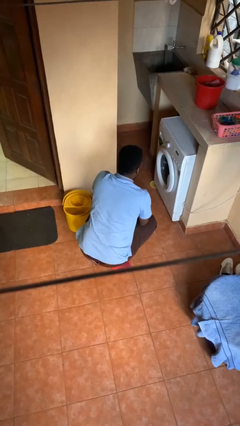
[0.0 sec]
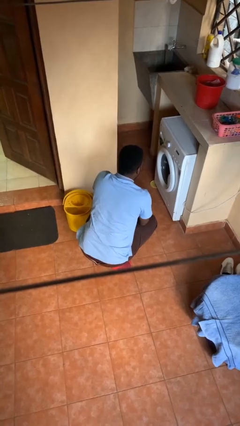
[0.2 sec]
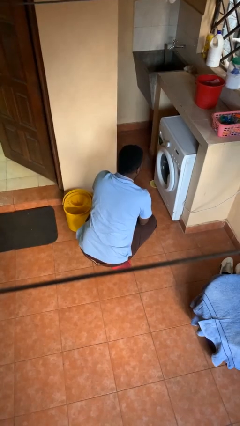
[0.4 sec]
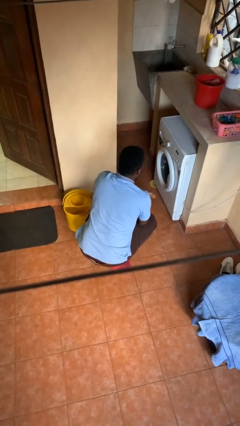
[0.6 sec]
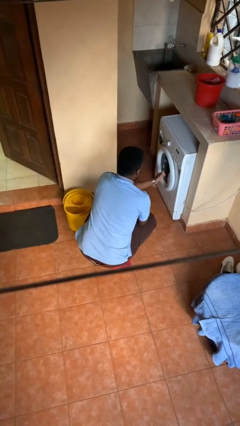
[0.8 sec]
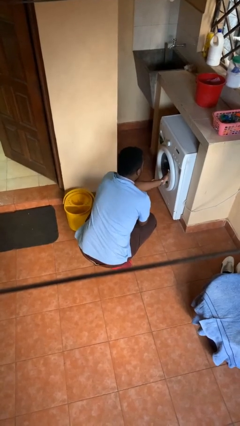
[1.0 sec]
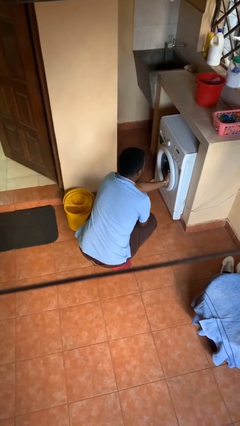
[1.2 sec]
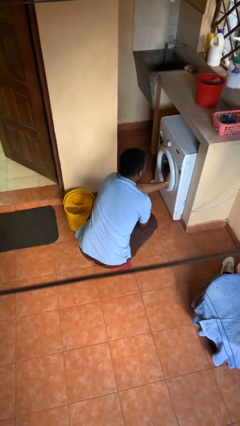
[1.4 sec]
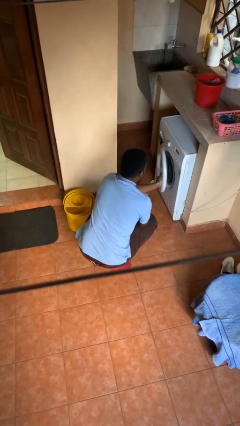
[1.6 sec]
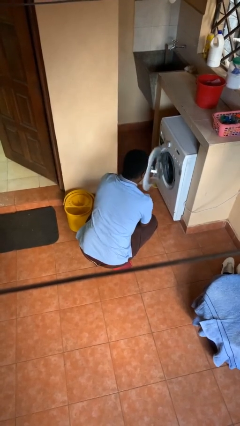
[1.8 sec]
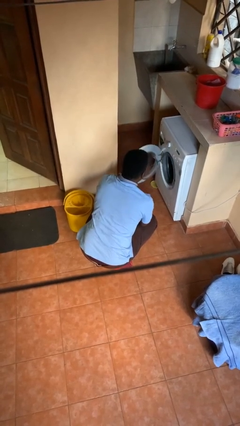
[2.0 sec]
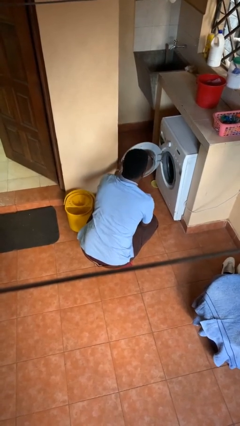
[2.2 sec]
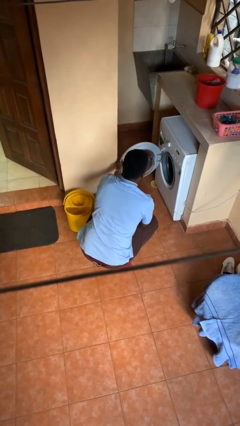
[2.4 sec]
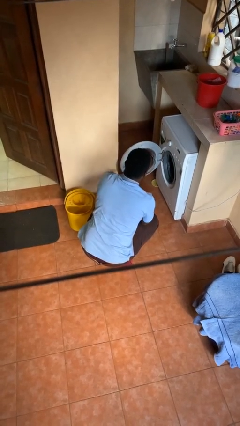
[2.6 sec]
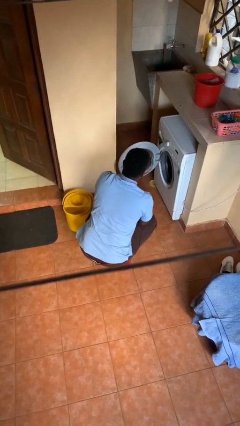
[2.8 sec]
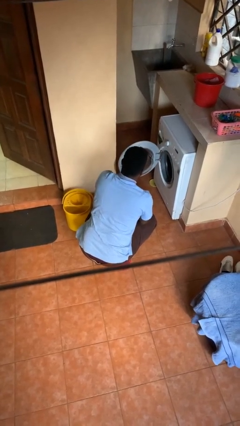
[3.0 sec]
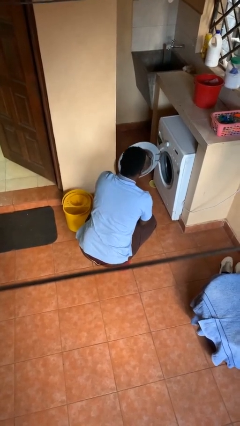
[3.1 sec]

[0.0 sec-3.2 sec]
person opens clothes washer

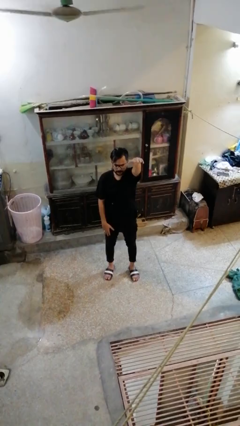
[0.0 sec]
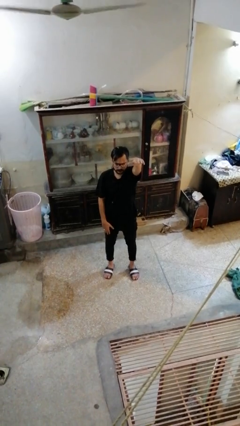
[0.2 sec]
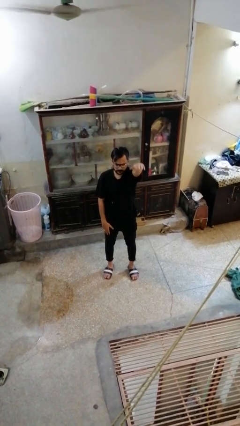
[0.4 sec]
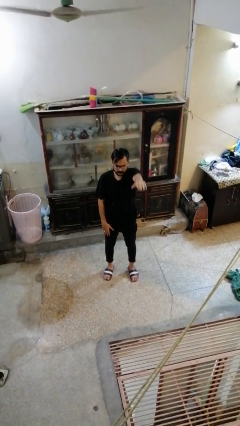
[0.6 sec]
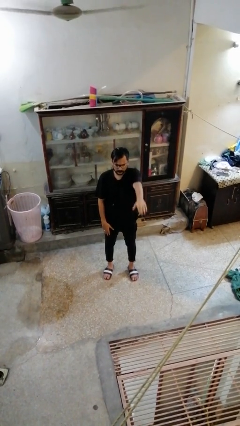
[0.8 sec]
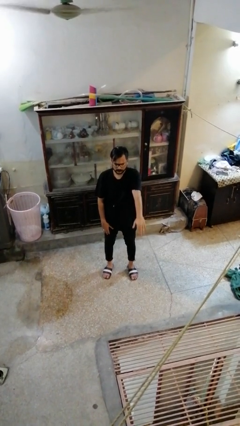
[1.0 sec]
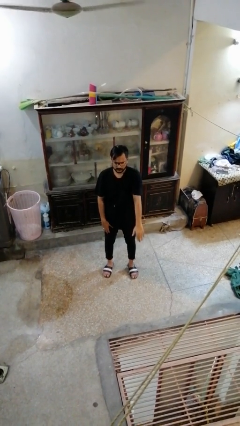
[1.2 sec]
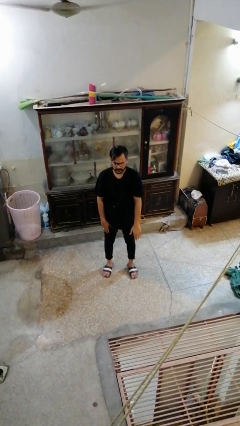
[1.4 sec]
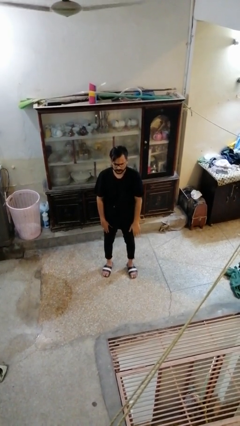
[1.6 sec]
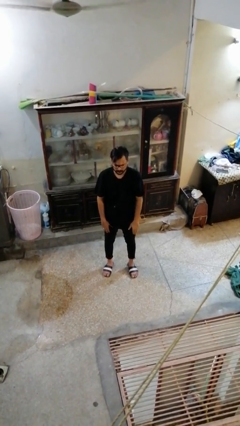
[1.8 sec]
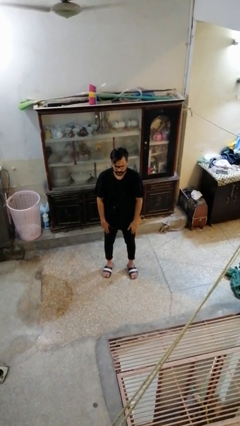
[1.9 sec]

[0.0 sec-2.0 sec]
person gestures swipe down

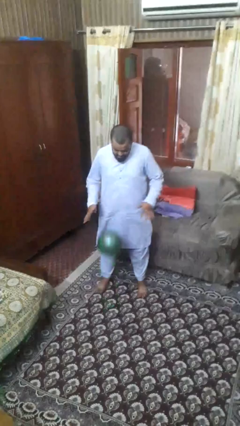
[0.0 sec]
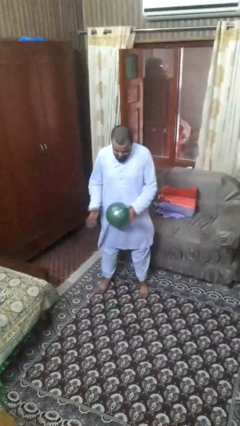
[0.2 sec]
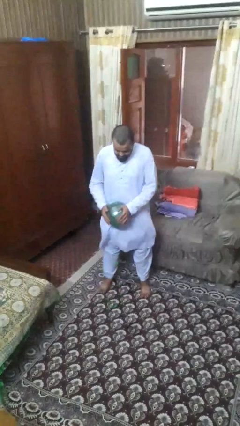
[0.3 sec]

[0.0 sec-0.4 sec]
person bounces ball on floor

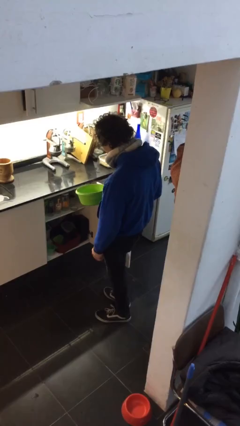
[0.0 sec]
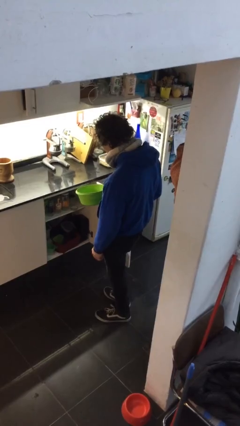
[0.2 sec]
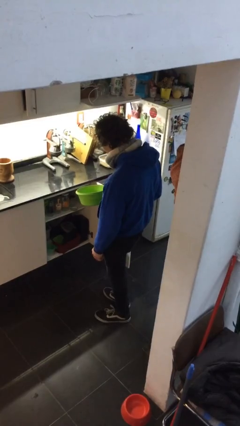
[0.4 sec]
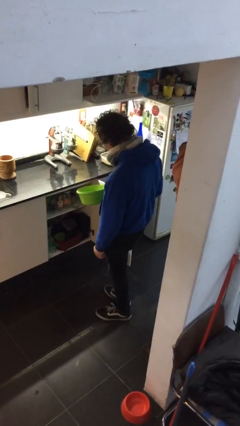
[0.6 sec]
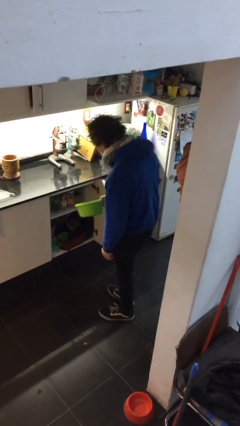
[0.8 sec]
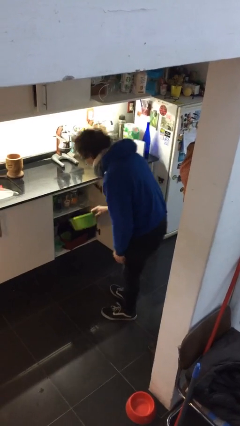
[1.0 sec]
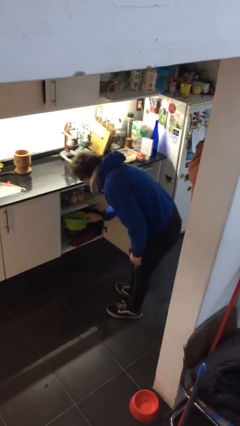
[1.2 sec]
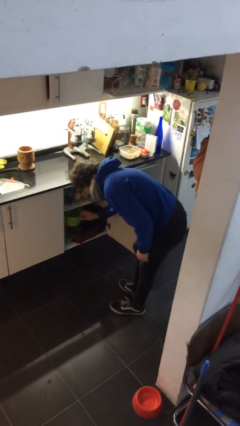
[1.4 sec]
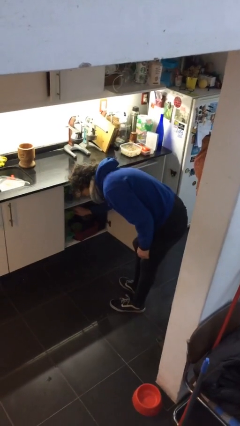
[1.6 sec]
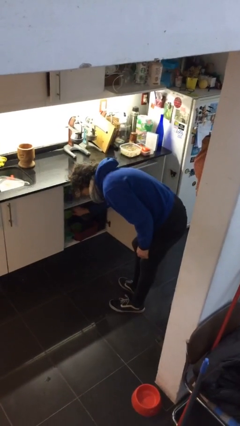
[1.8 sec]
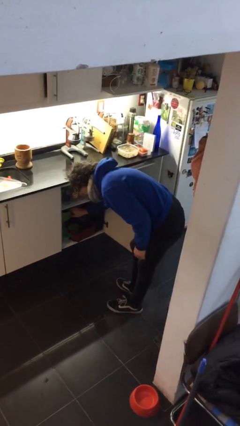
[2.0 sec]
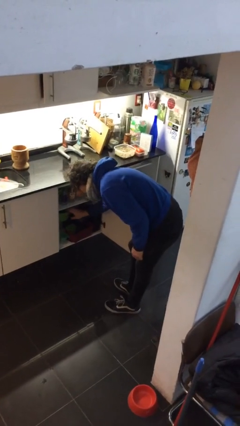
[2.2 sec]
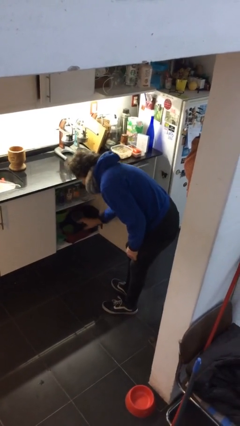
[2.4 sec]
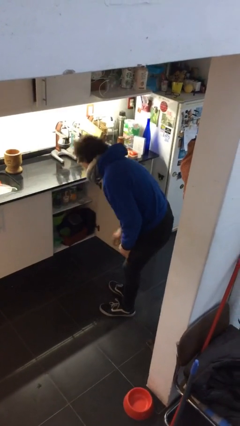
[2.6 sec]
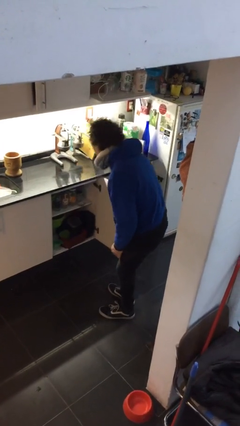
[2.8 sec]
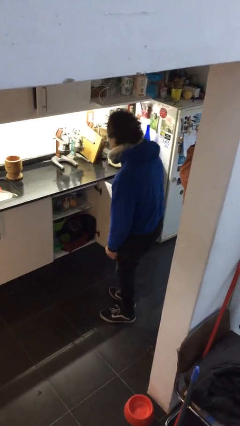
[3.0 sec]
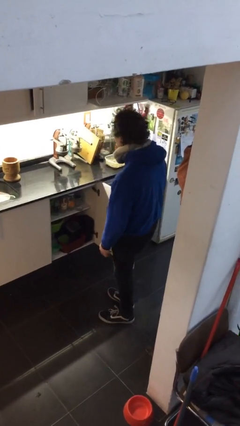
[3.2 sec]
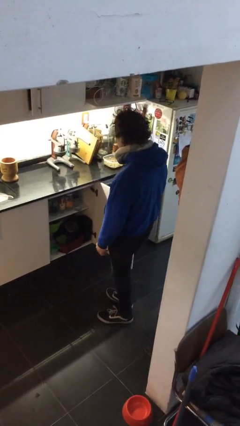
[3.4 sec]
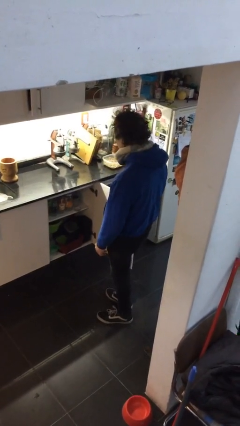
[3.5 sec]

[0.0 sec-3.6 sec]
person puts down object into cabinet

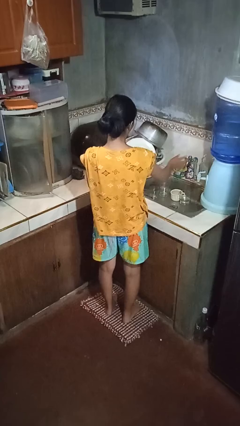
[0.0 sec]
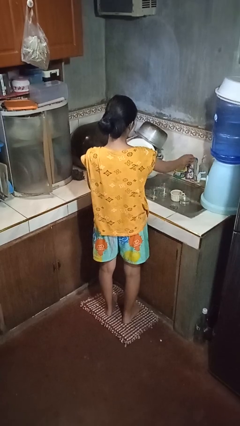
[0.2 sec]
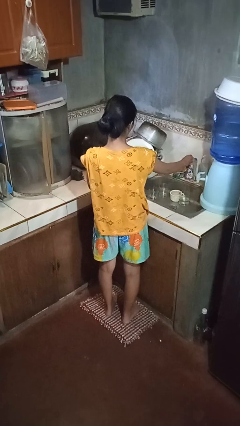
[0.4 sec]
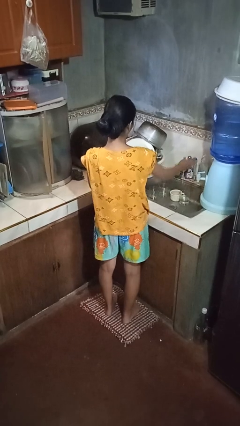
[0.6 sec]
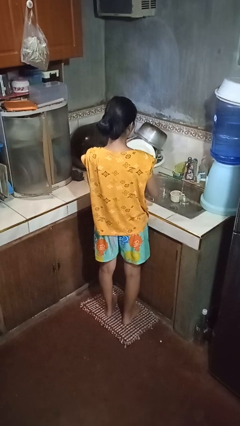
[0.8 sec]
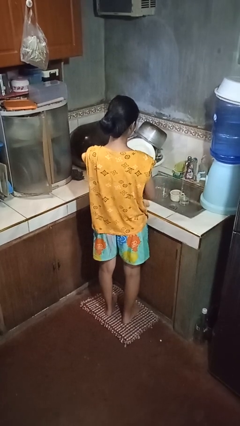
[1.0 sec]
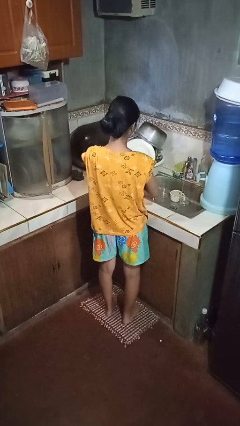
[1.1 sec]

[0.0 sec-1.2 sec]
person turns on faucet

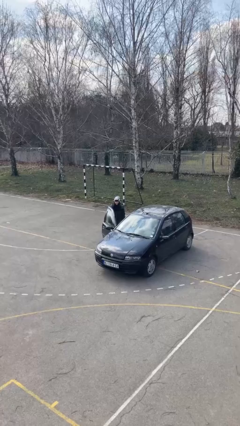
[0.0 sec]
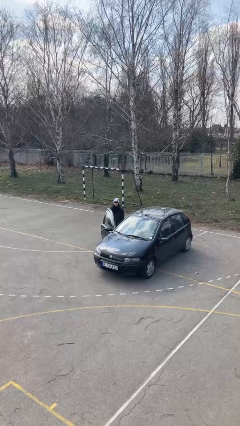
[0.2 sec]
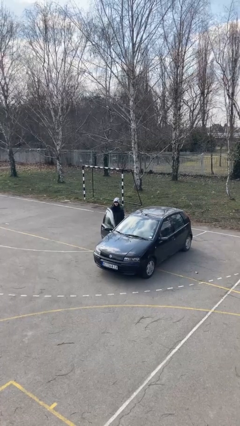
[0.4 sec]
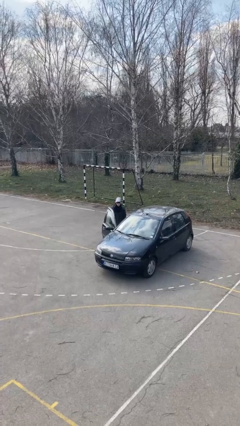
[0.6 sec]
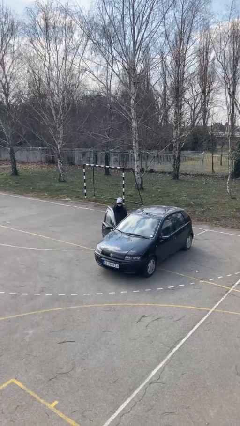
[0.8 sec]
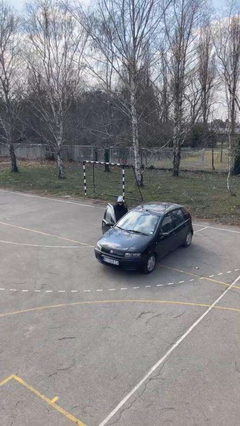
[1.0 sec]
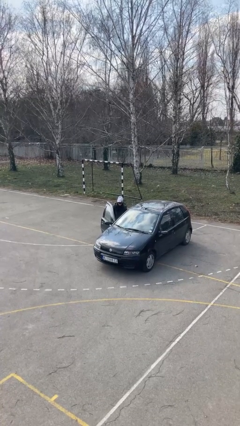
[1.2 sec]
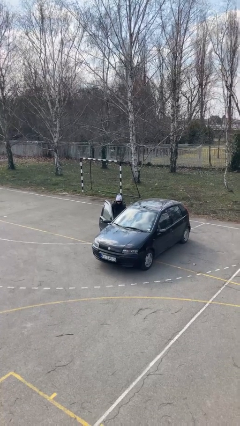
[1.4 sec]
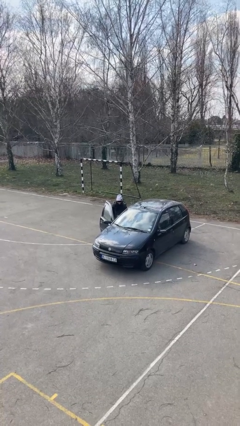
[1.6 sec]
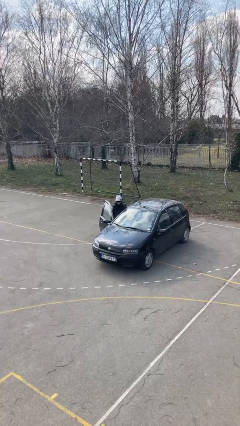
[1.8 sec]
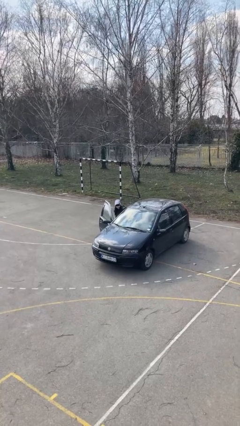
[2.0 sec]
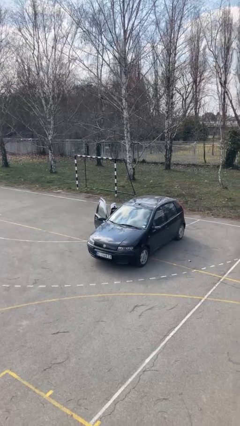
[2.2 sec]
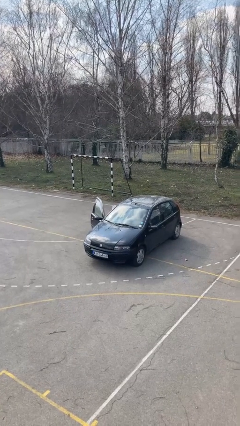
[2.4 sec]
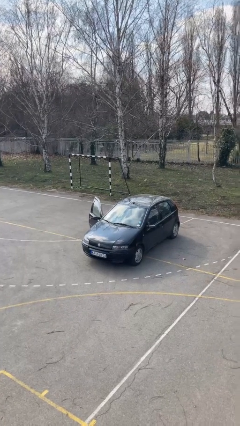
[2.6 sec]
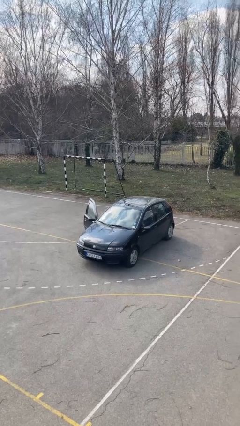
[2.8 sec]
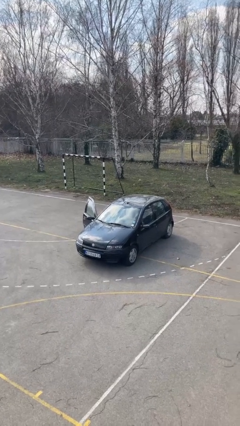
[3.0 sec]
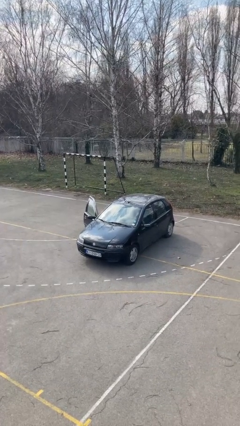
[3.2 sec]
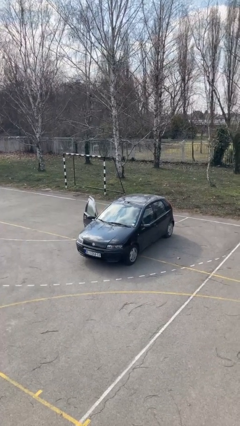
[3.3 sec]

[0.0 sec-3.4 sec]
person enters car

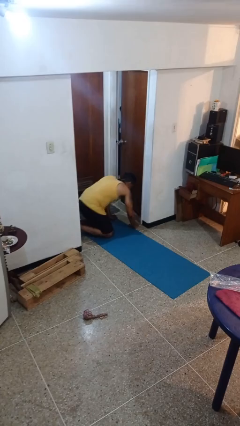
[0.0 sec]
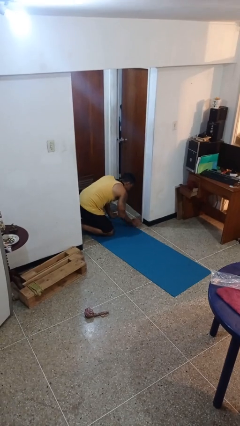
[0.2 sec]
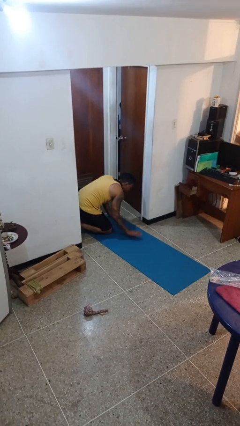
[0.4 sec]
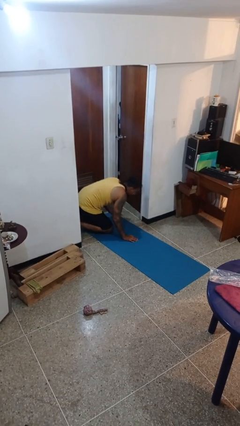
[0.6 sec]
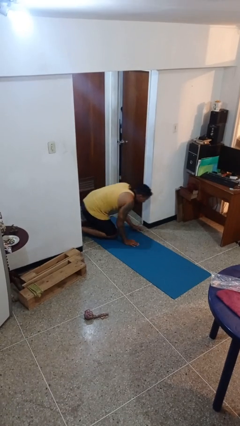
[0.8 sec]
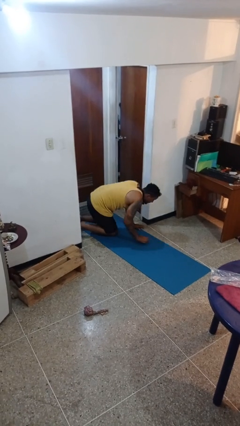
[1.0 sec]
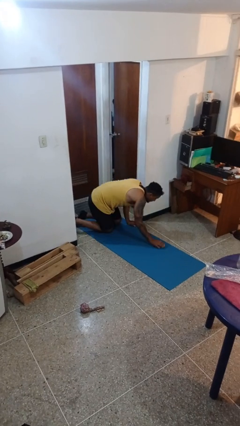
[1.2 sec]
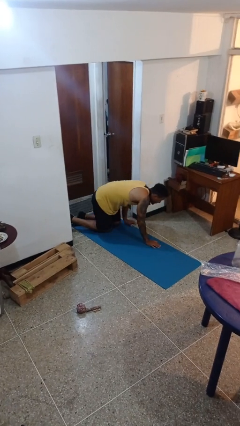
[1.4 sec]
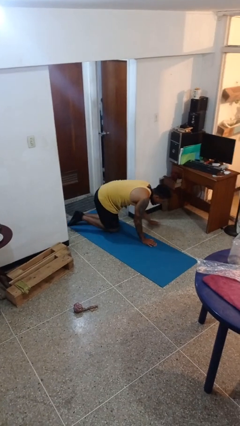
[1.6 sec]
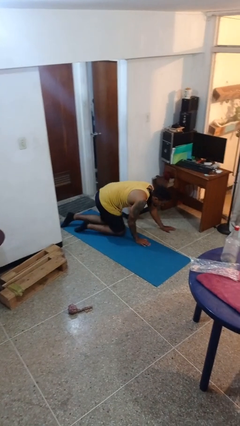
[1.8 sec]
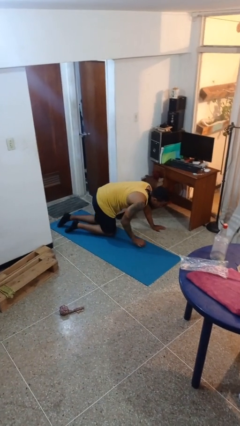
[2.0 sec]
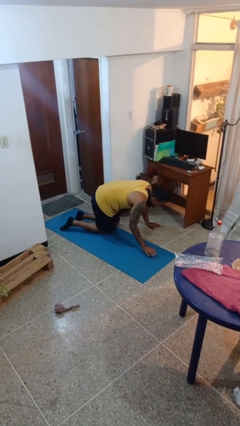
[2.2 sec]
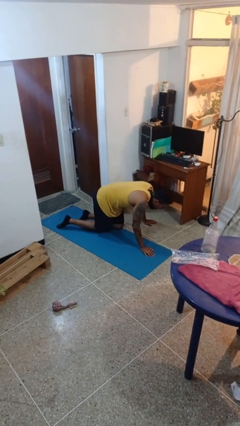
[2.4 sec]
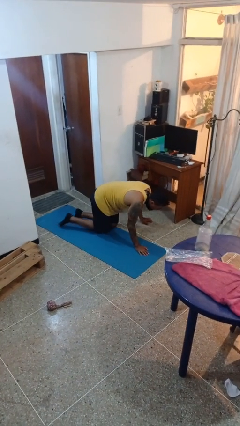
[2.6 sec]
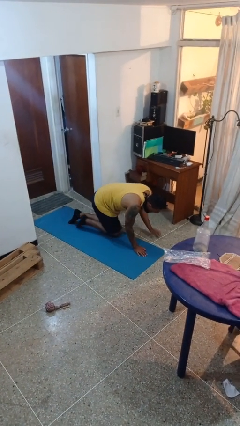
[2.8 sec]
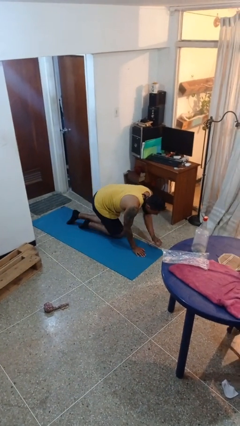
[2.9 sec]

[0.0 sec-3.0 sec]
person crawls
